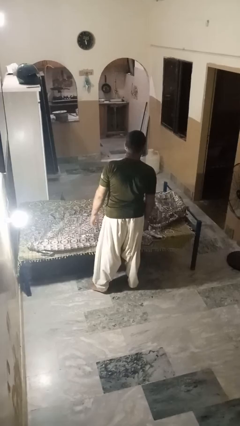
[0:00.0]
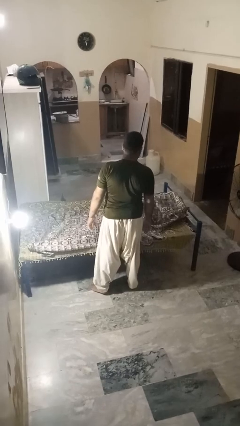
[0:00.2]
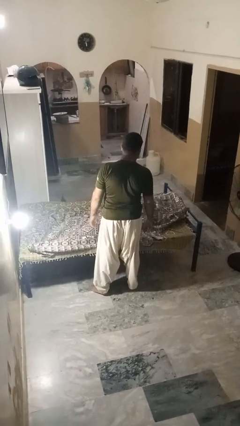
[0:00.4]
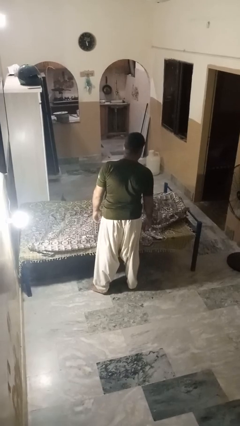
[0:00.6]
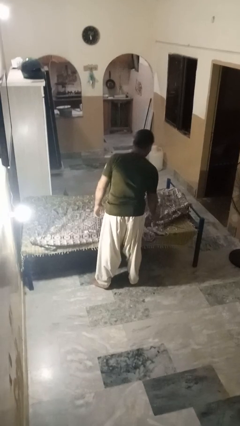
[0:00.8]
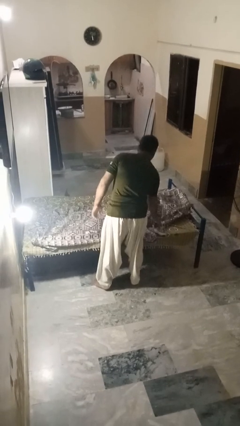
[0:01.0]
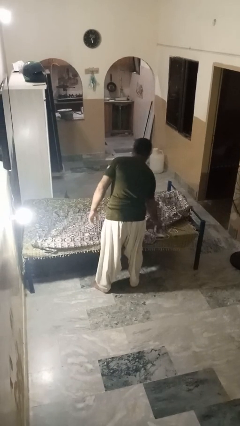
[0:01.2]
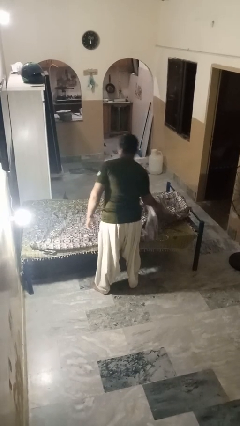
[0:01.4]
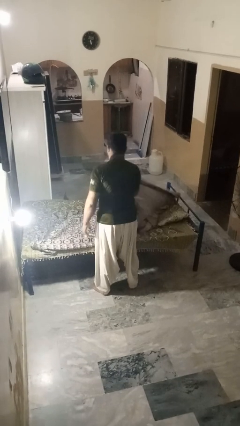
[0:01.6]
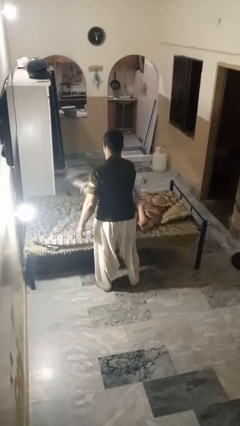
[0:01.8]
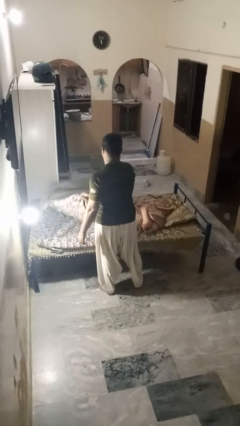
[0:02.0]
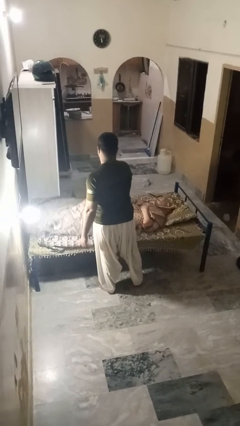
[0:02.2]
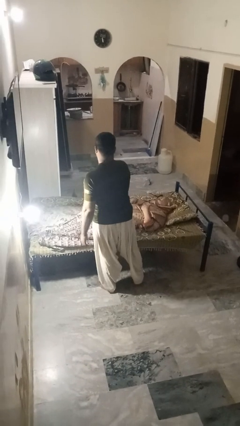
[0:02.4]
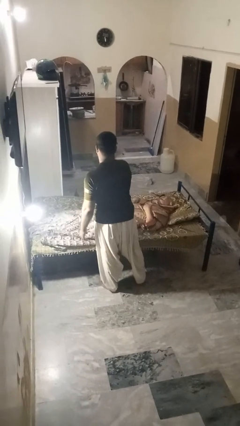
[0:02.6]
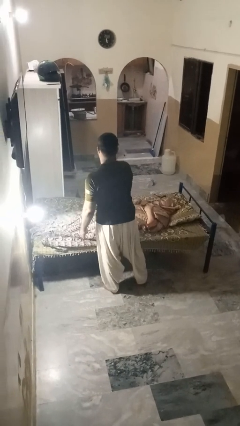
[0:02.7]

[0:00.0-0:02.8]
person uncovers friend with blanket

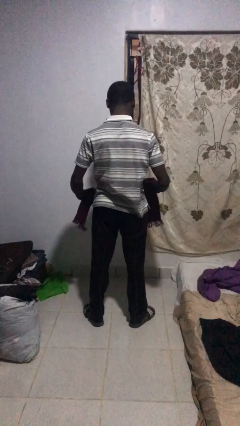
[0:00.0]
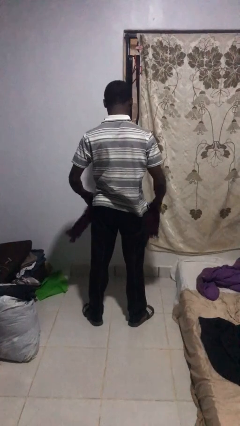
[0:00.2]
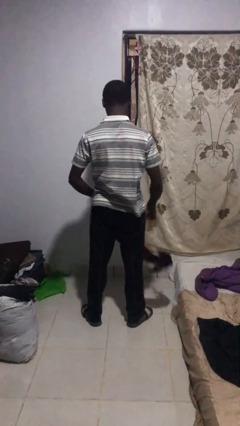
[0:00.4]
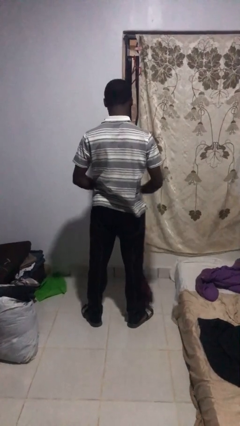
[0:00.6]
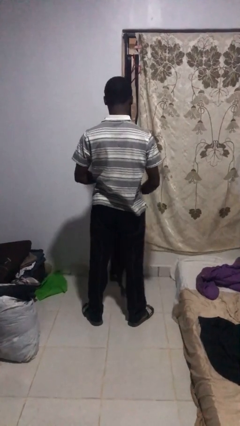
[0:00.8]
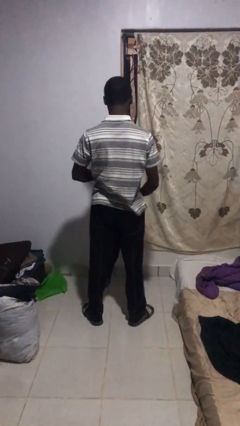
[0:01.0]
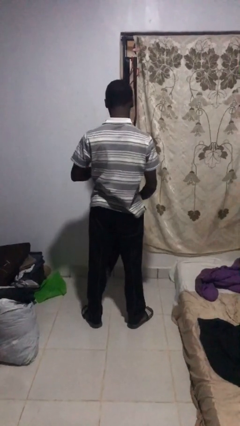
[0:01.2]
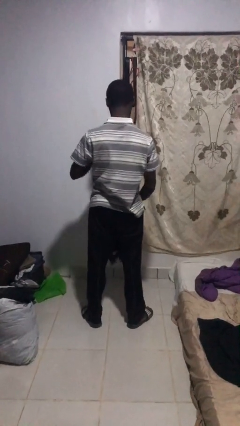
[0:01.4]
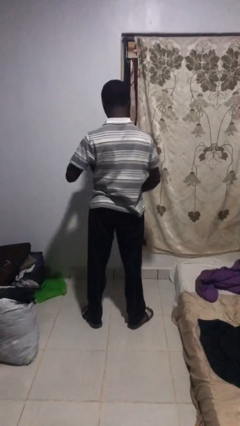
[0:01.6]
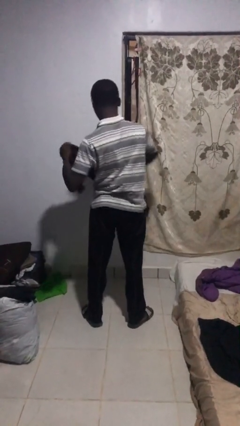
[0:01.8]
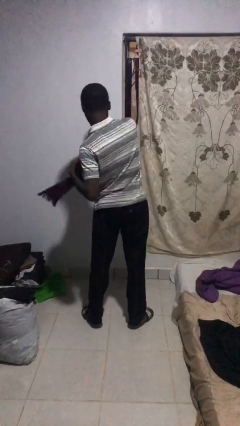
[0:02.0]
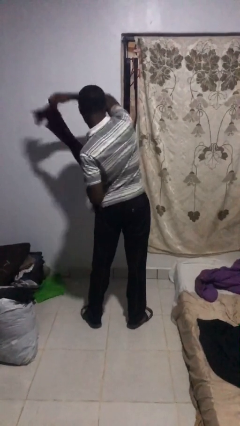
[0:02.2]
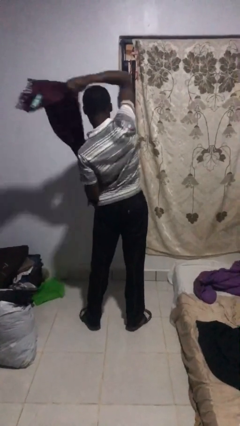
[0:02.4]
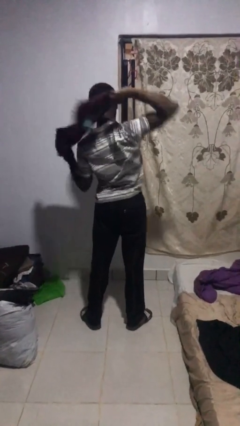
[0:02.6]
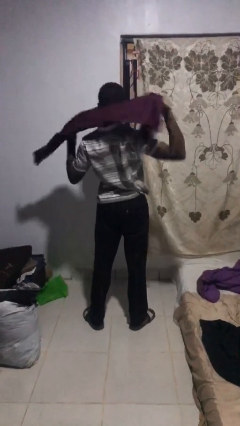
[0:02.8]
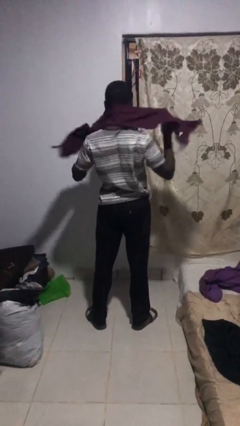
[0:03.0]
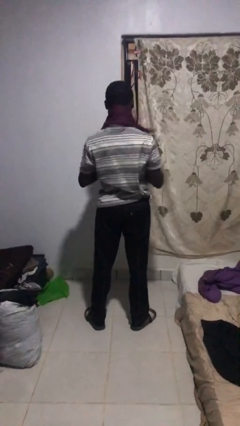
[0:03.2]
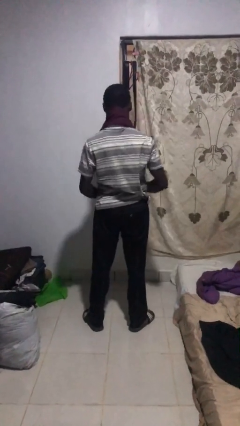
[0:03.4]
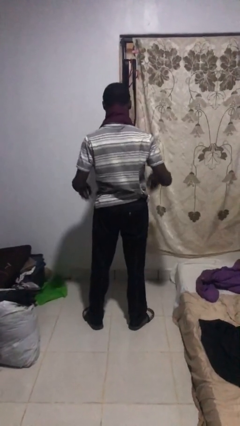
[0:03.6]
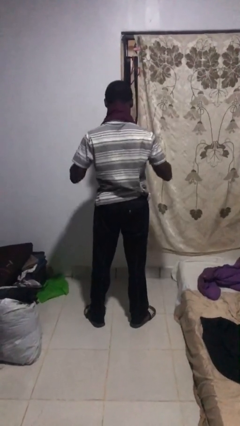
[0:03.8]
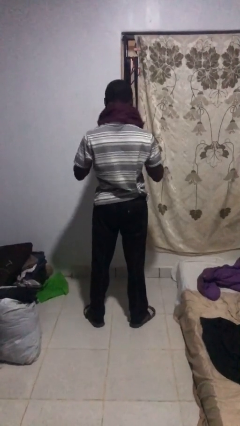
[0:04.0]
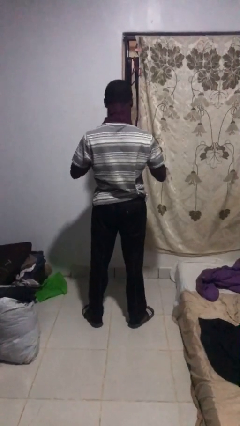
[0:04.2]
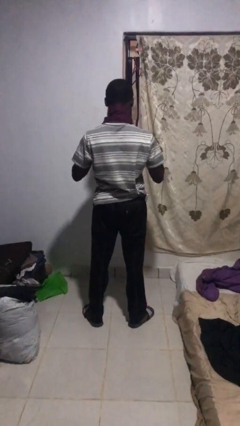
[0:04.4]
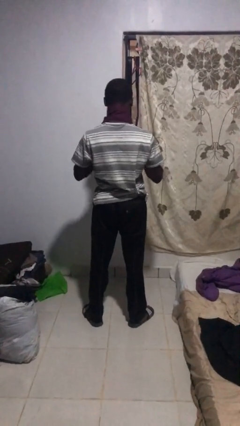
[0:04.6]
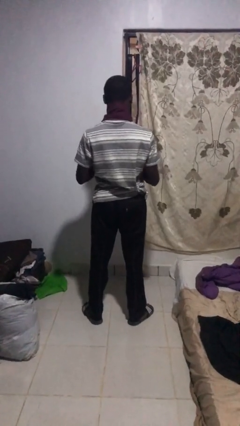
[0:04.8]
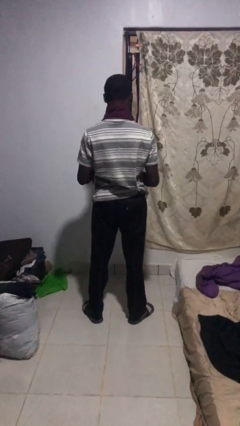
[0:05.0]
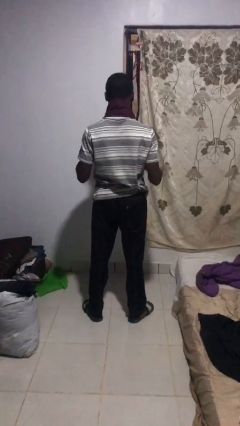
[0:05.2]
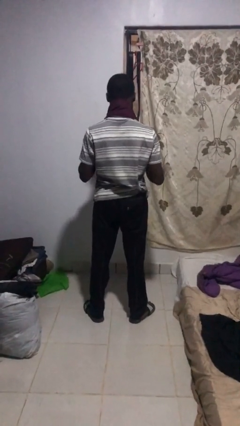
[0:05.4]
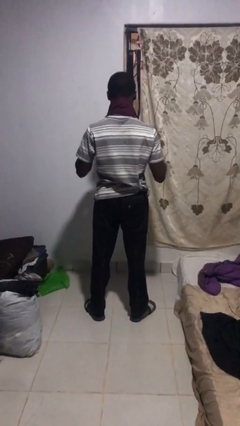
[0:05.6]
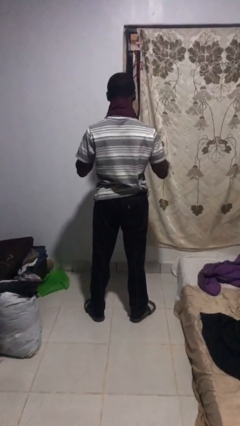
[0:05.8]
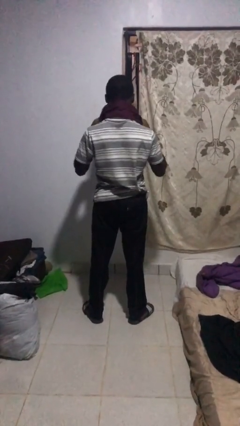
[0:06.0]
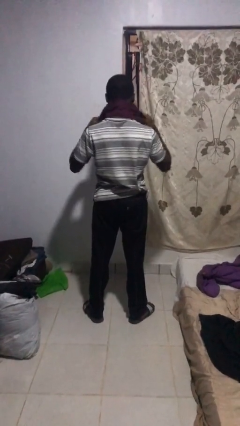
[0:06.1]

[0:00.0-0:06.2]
person puts on scarf

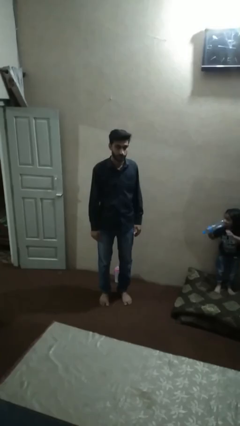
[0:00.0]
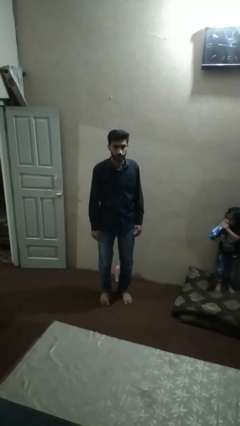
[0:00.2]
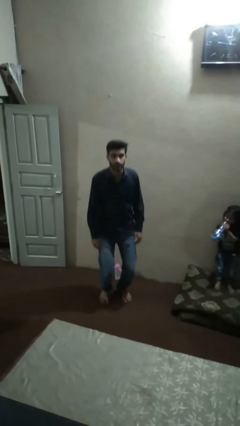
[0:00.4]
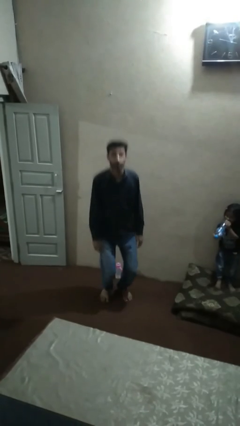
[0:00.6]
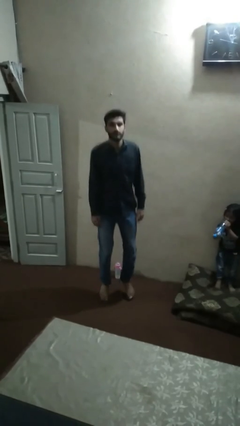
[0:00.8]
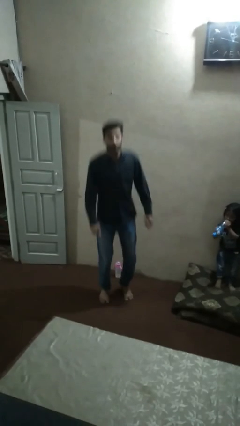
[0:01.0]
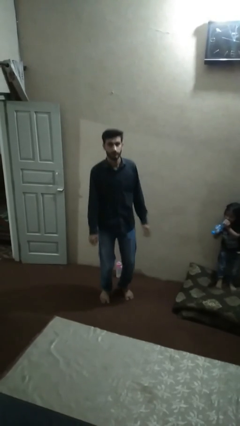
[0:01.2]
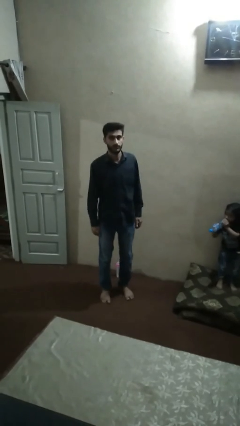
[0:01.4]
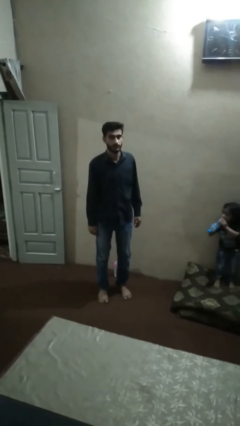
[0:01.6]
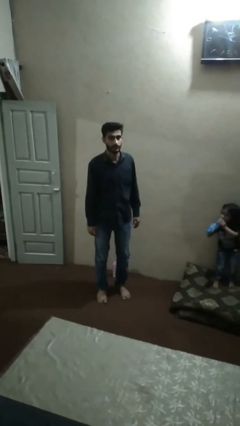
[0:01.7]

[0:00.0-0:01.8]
person jumps

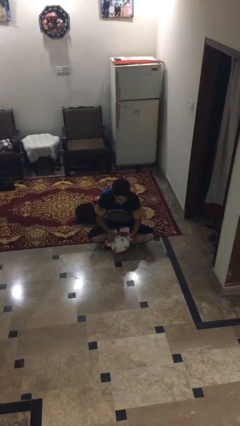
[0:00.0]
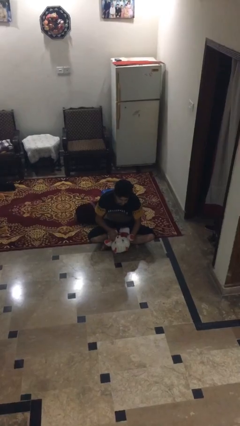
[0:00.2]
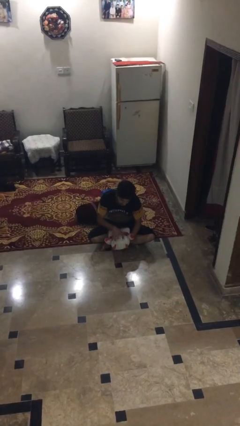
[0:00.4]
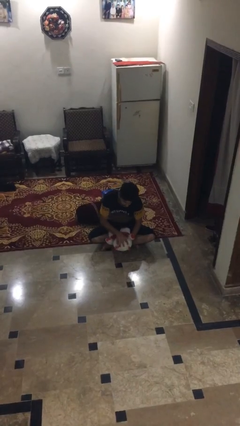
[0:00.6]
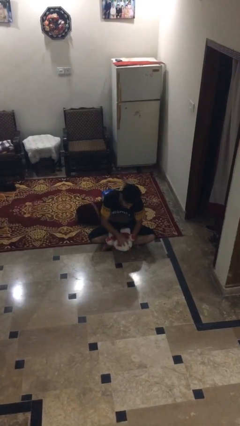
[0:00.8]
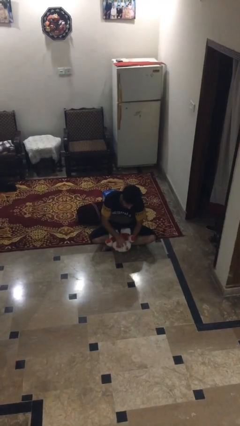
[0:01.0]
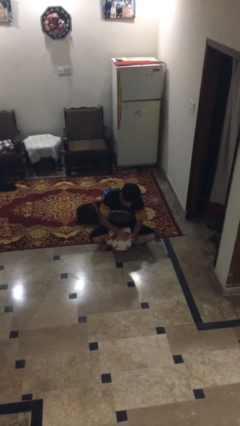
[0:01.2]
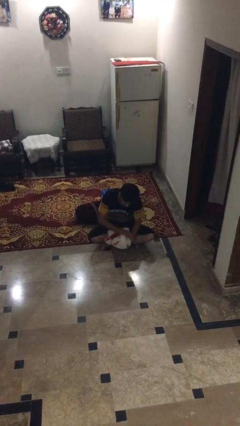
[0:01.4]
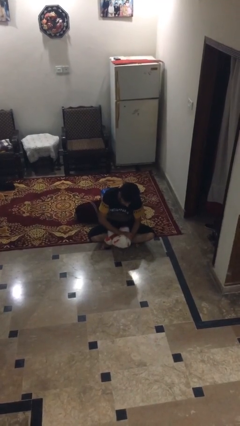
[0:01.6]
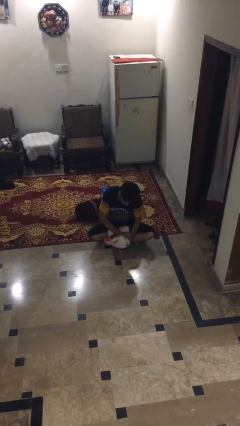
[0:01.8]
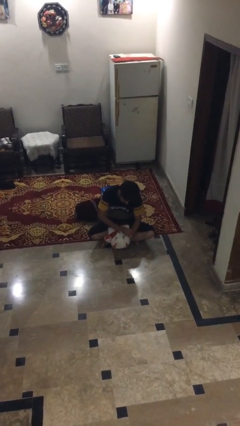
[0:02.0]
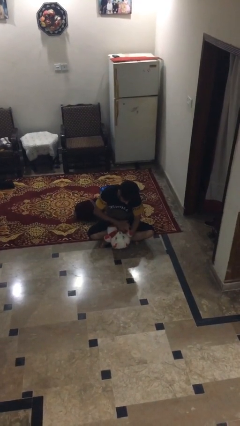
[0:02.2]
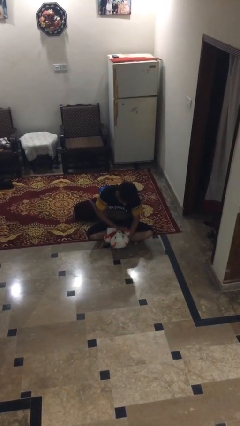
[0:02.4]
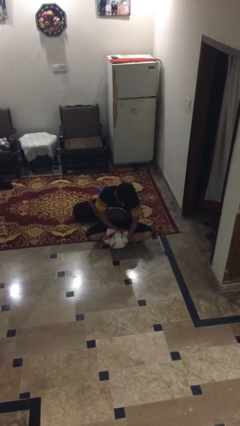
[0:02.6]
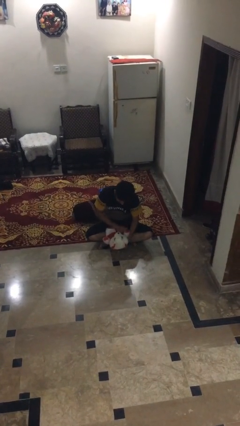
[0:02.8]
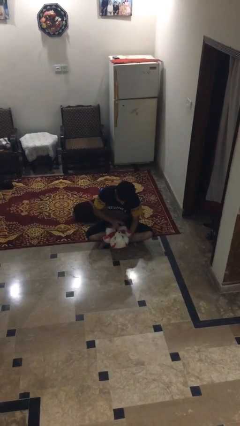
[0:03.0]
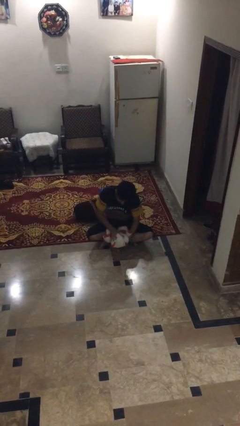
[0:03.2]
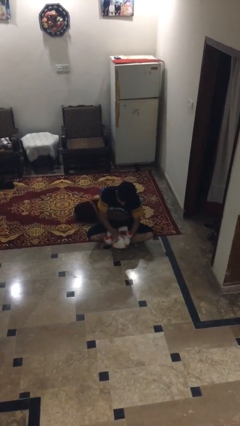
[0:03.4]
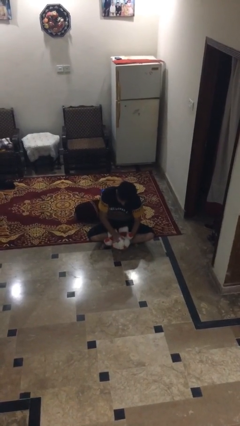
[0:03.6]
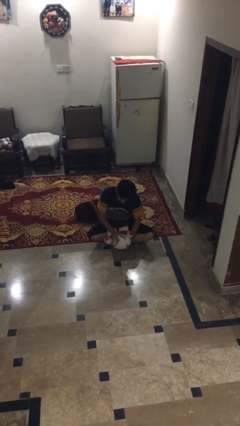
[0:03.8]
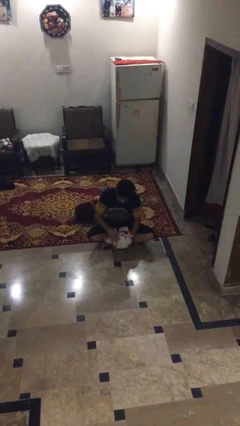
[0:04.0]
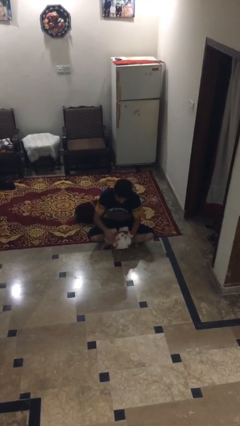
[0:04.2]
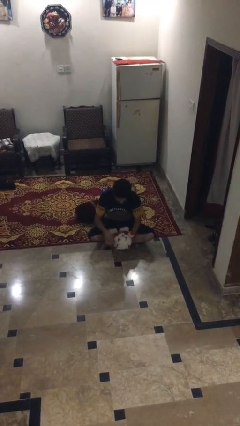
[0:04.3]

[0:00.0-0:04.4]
person squeezes object

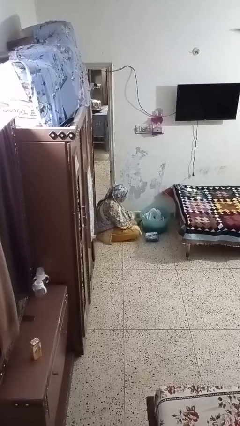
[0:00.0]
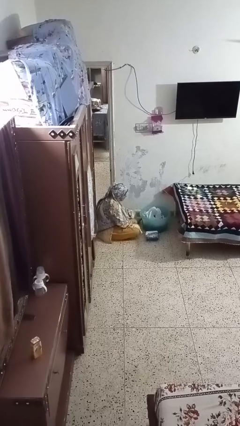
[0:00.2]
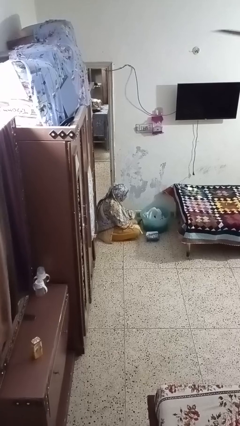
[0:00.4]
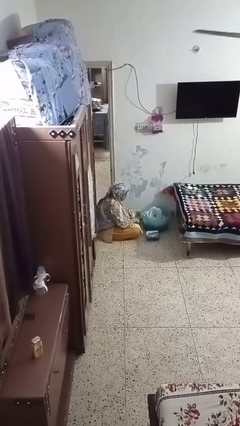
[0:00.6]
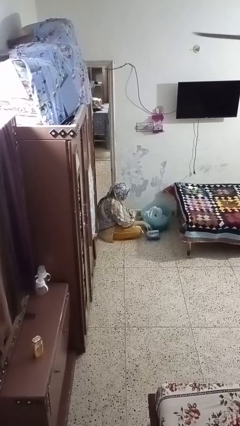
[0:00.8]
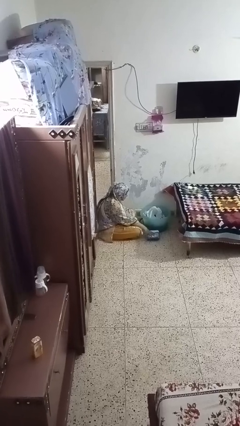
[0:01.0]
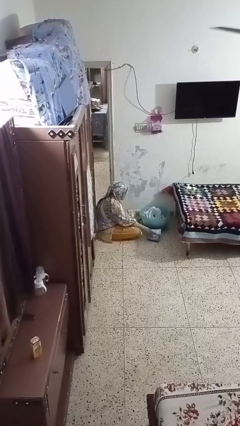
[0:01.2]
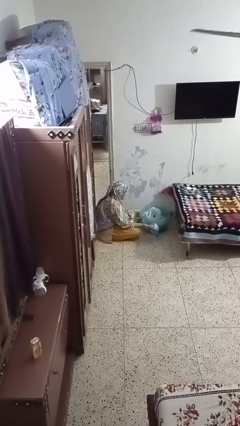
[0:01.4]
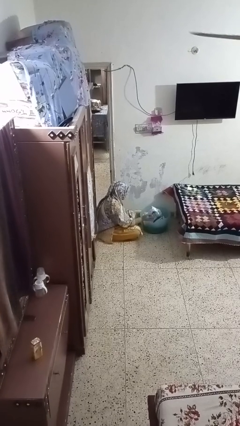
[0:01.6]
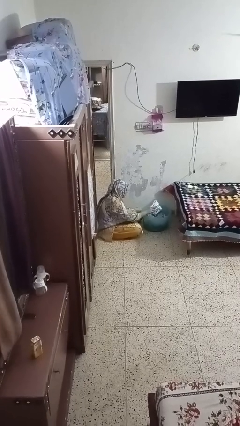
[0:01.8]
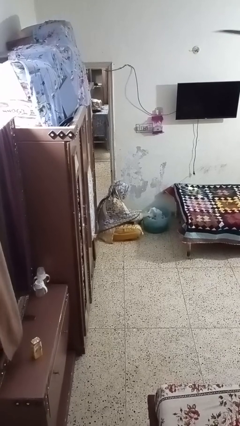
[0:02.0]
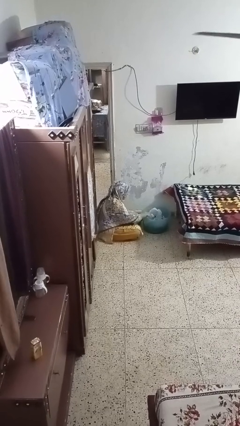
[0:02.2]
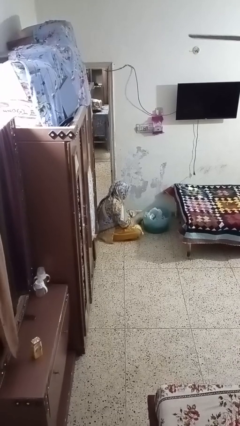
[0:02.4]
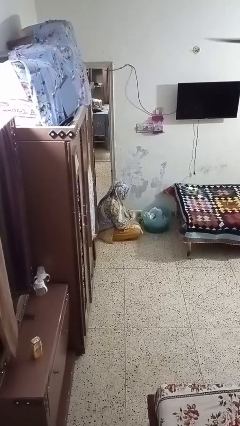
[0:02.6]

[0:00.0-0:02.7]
person puts object into basket
